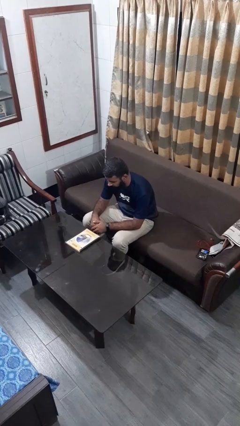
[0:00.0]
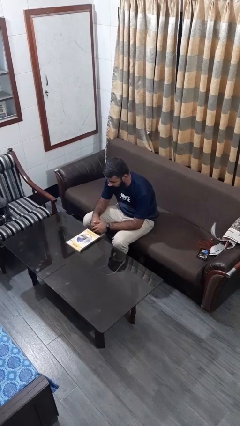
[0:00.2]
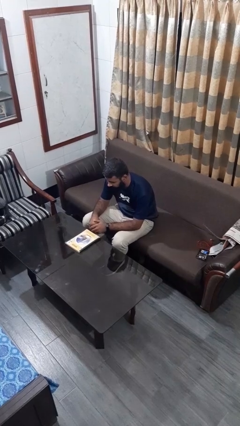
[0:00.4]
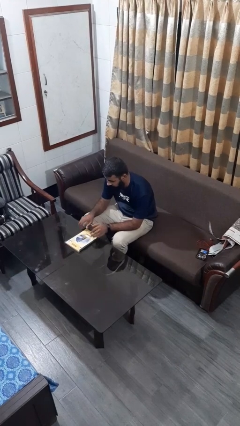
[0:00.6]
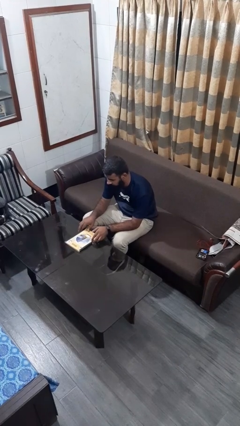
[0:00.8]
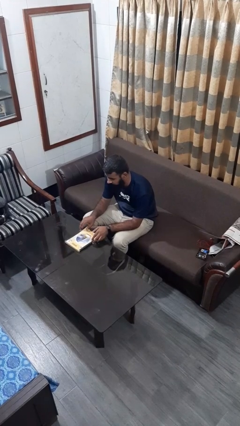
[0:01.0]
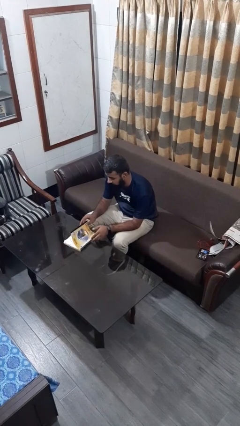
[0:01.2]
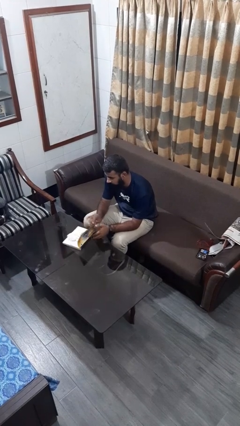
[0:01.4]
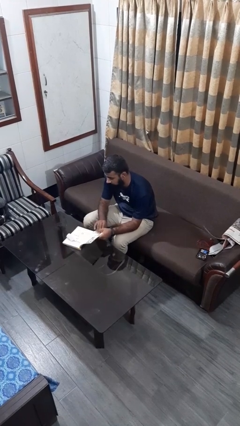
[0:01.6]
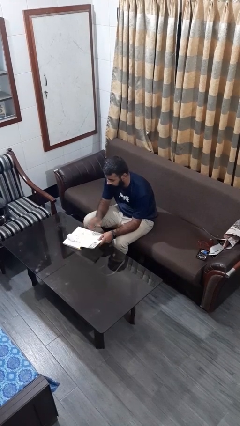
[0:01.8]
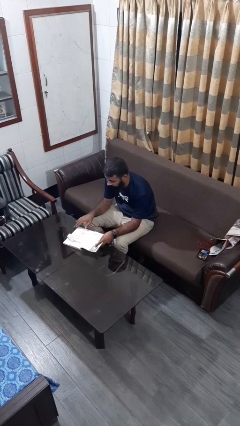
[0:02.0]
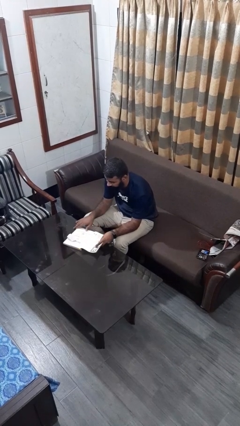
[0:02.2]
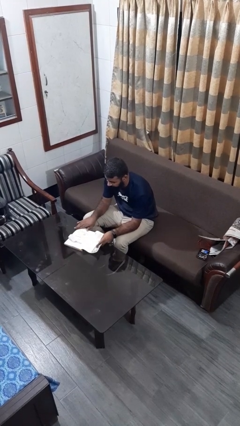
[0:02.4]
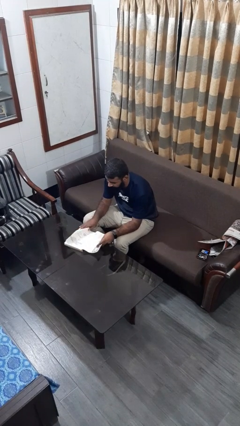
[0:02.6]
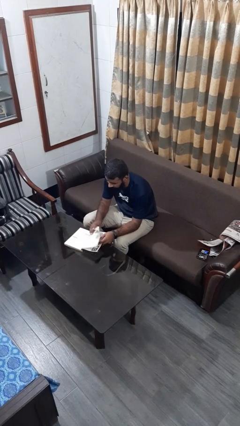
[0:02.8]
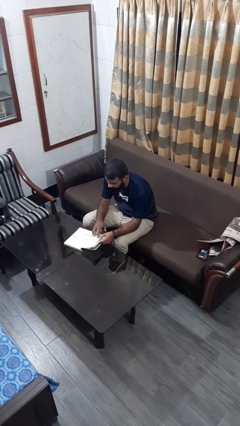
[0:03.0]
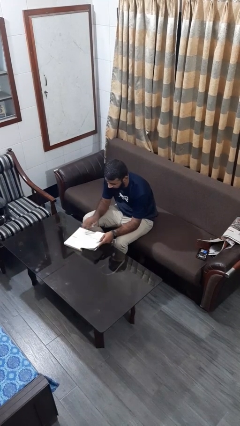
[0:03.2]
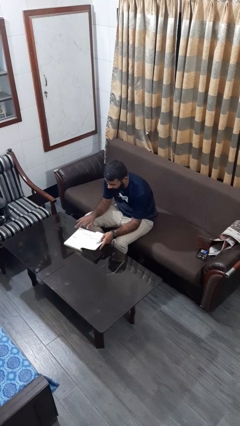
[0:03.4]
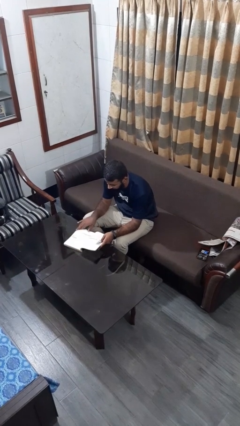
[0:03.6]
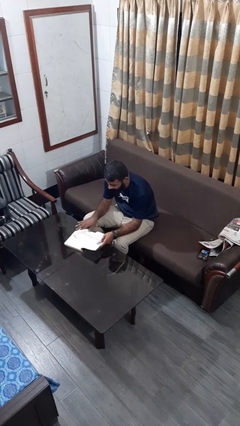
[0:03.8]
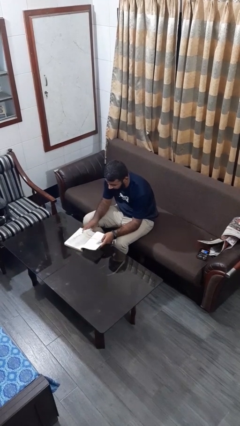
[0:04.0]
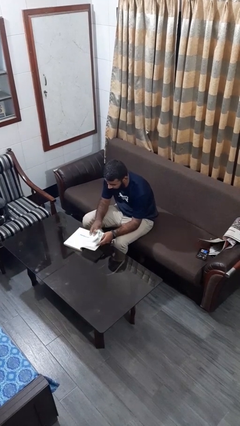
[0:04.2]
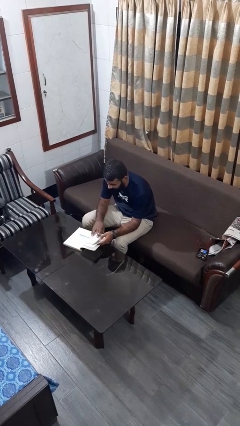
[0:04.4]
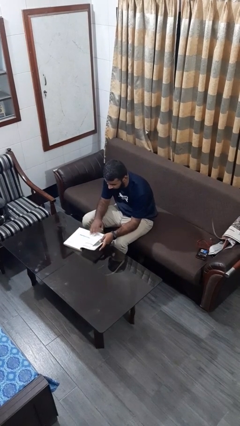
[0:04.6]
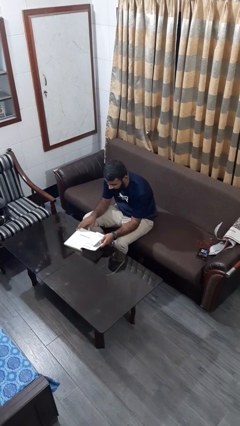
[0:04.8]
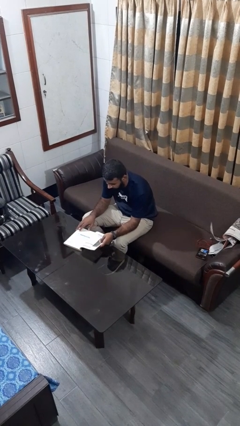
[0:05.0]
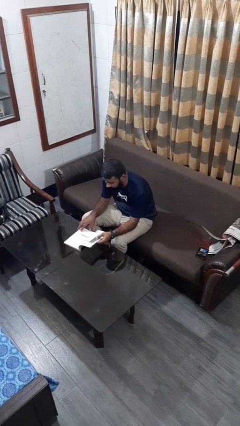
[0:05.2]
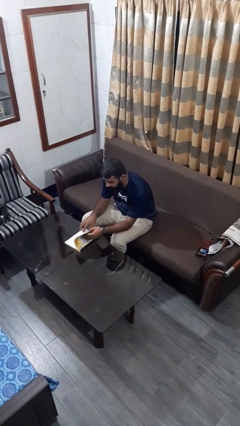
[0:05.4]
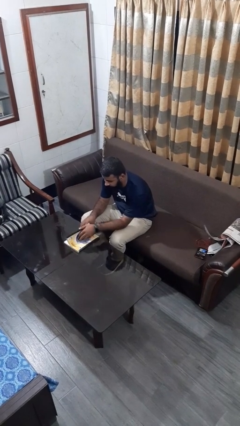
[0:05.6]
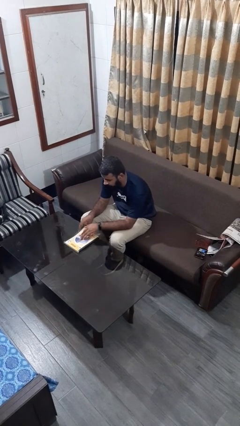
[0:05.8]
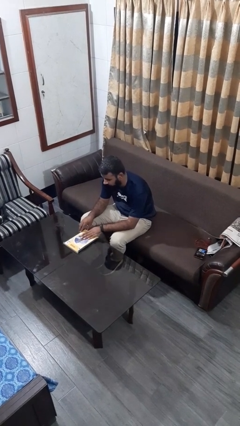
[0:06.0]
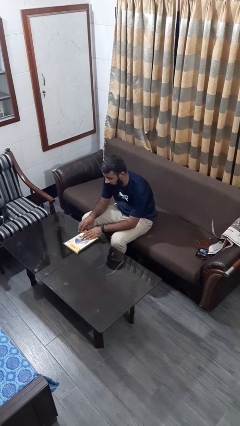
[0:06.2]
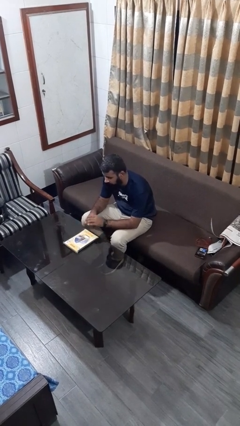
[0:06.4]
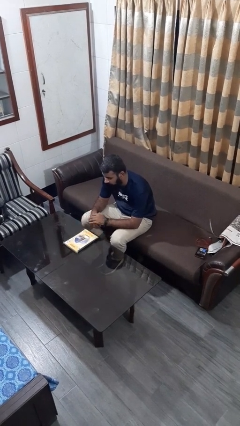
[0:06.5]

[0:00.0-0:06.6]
person reads book

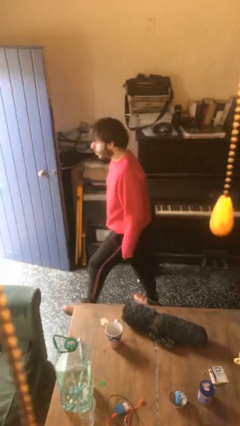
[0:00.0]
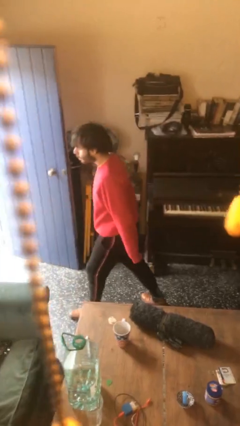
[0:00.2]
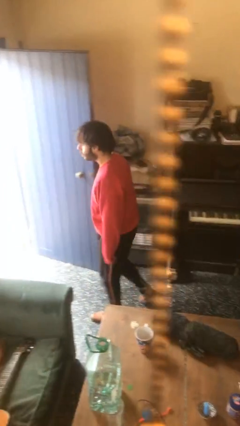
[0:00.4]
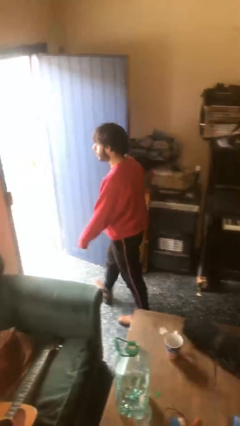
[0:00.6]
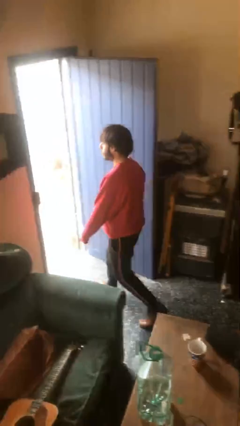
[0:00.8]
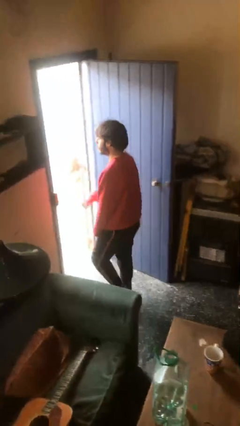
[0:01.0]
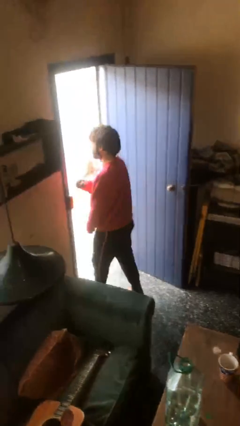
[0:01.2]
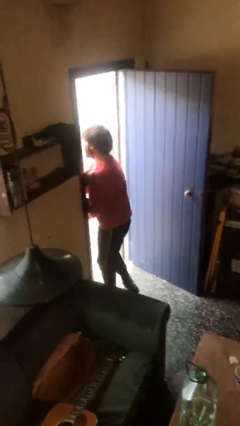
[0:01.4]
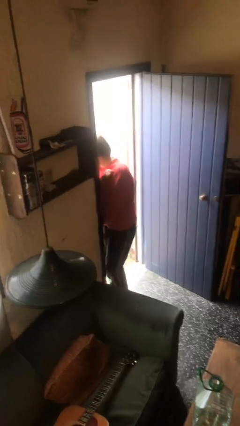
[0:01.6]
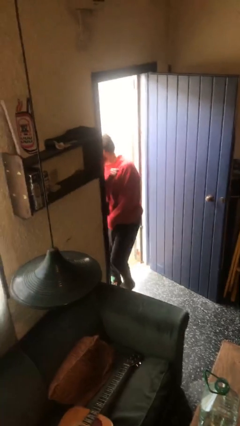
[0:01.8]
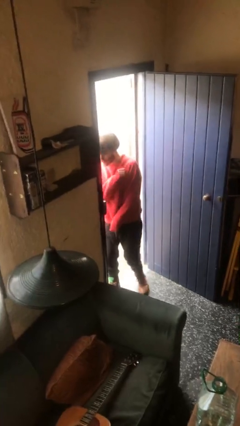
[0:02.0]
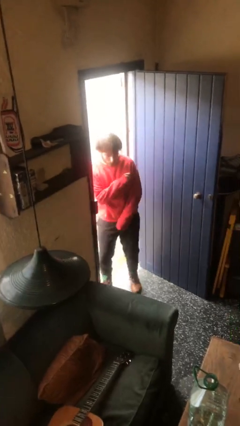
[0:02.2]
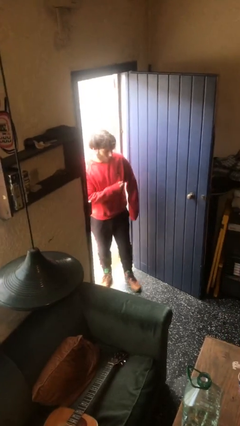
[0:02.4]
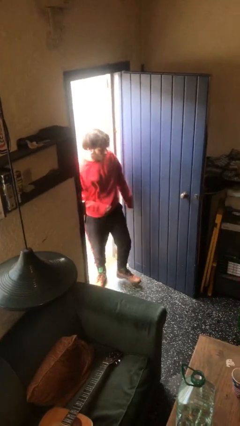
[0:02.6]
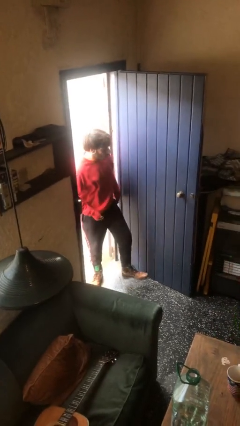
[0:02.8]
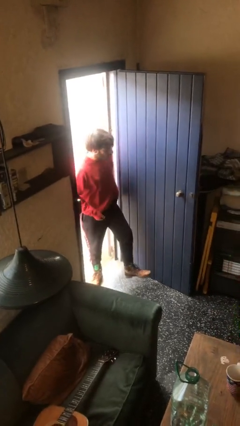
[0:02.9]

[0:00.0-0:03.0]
person bumps into wall

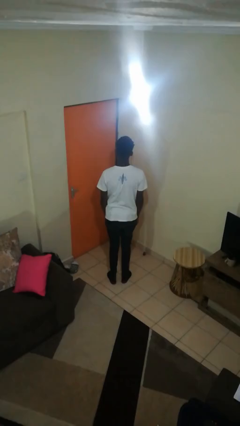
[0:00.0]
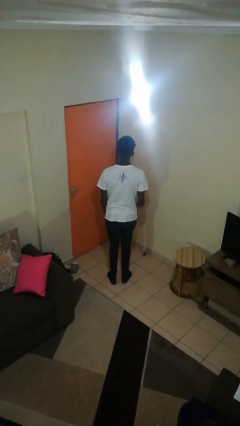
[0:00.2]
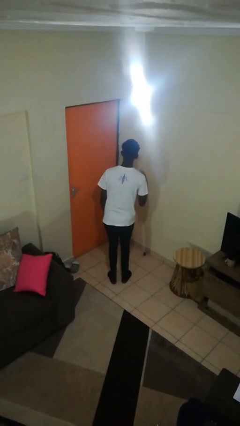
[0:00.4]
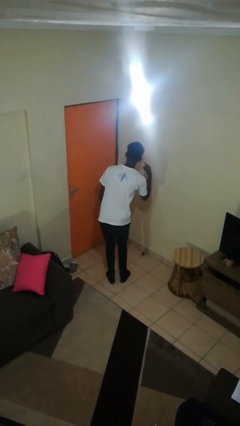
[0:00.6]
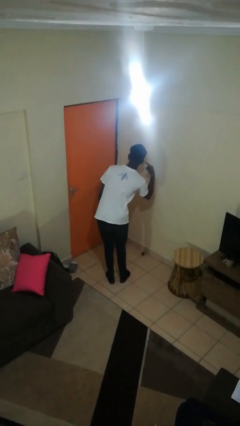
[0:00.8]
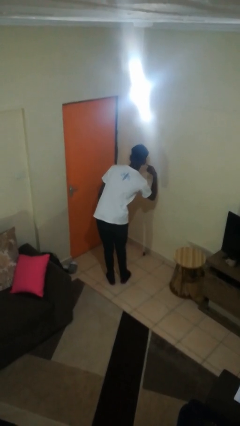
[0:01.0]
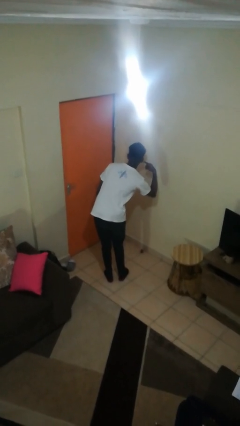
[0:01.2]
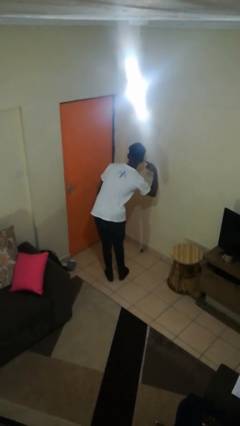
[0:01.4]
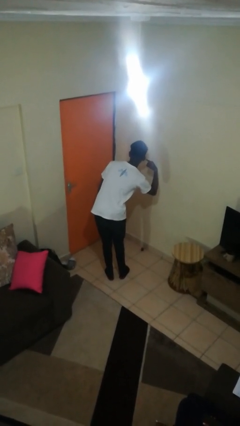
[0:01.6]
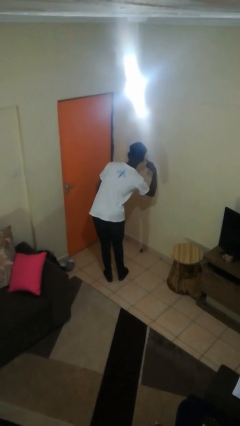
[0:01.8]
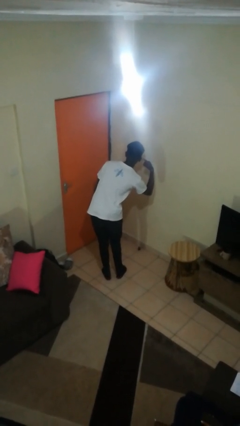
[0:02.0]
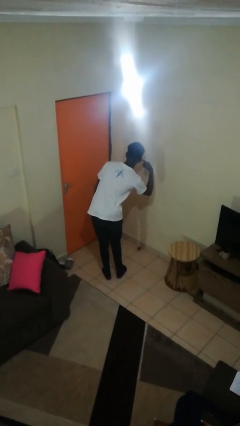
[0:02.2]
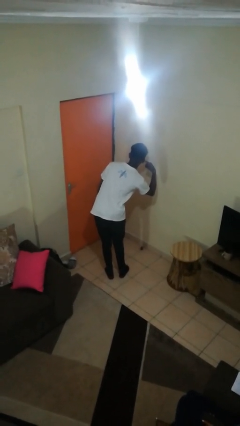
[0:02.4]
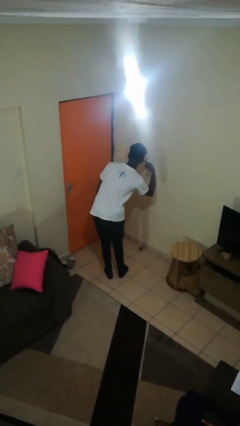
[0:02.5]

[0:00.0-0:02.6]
person gestures listen closely

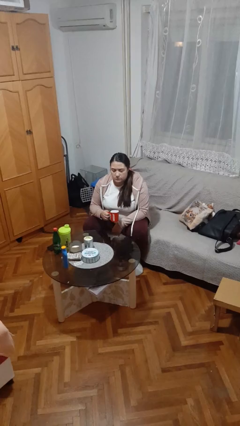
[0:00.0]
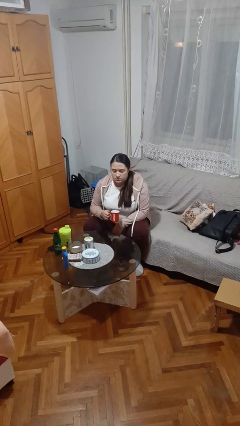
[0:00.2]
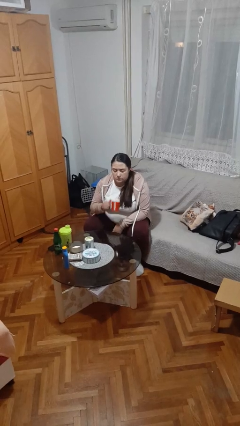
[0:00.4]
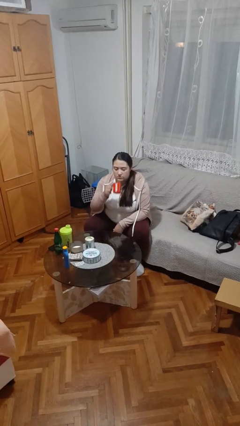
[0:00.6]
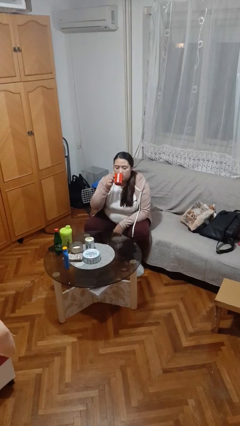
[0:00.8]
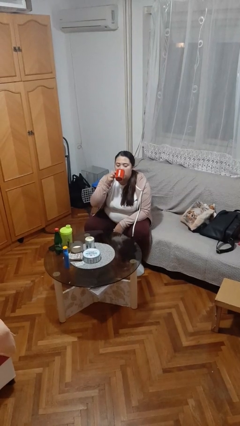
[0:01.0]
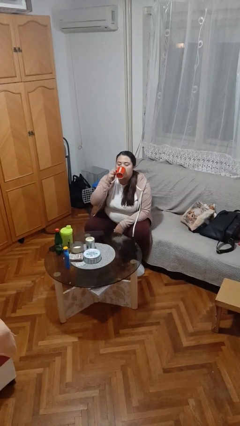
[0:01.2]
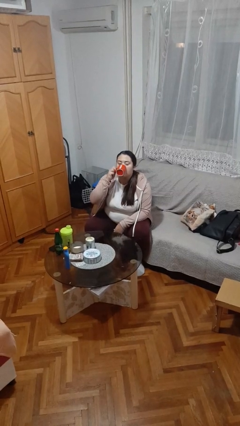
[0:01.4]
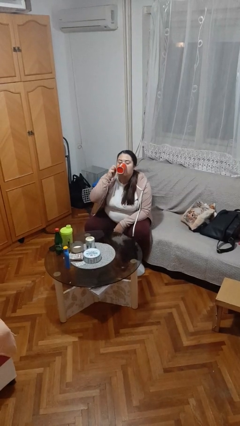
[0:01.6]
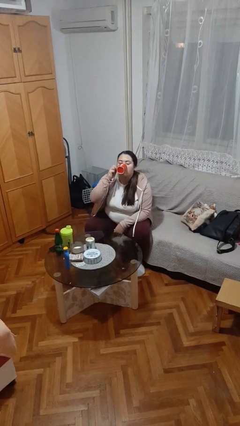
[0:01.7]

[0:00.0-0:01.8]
person drinks from mug

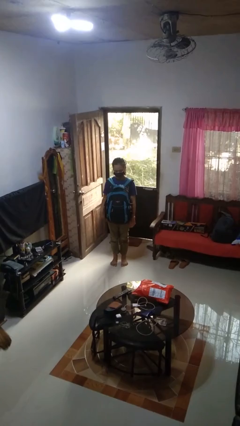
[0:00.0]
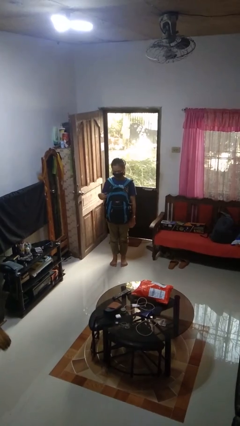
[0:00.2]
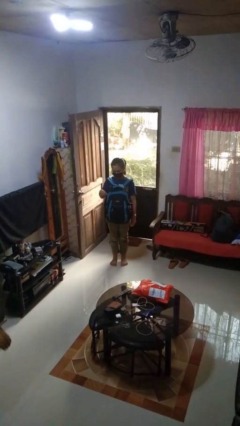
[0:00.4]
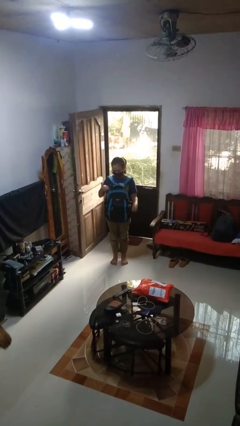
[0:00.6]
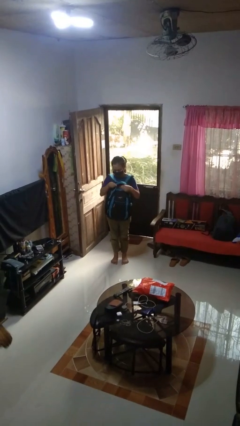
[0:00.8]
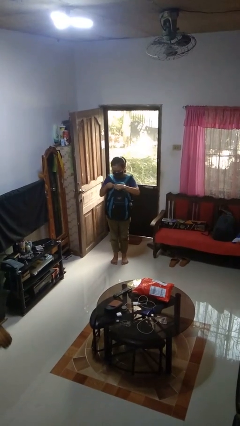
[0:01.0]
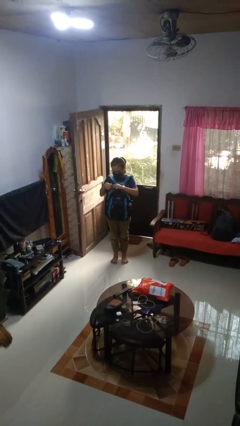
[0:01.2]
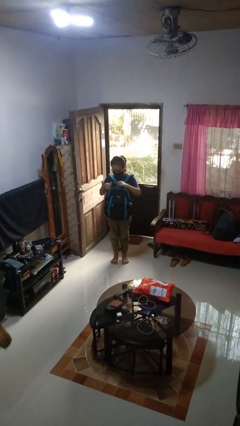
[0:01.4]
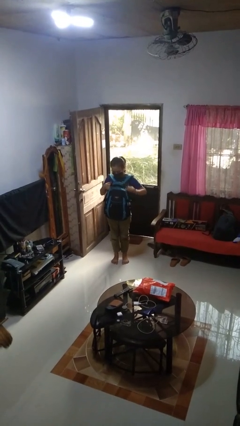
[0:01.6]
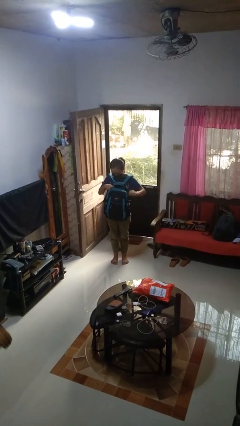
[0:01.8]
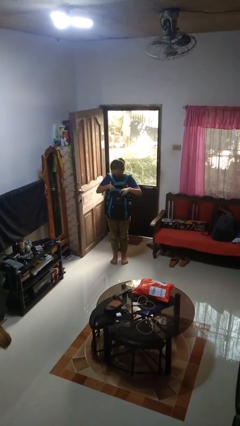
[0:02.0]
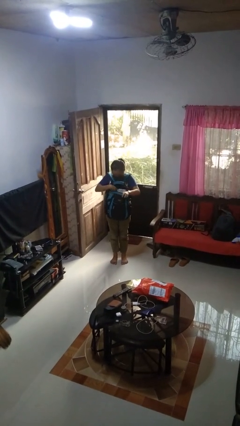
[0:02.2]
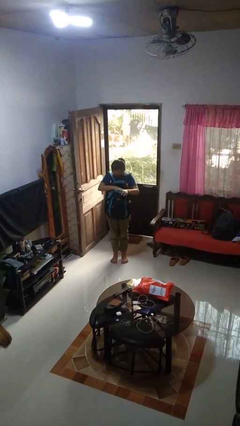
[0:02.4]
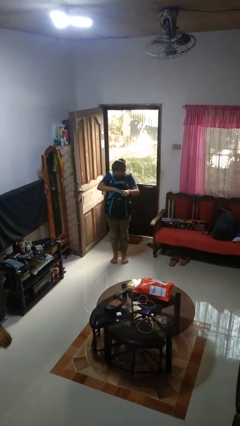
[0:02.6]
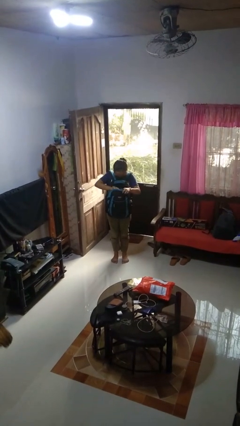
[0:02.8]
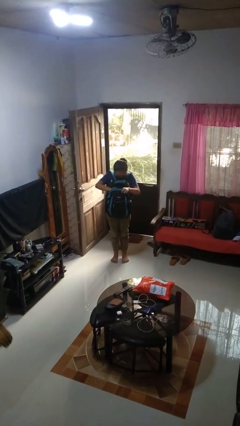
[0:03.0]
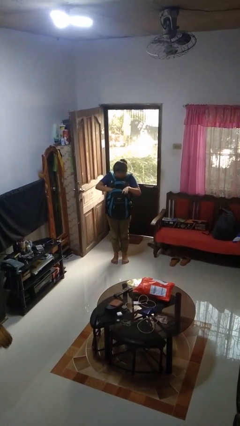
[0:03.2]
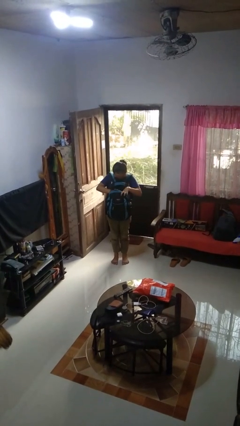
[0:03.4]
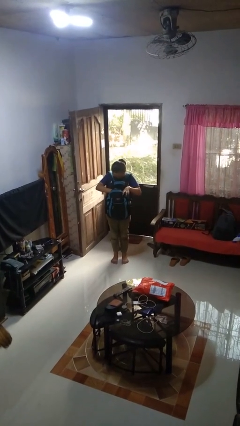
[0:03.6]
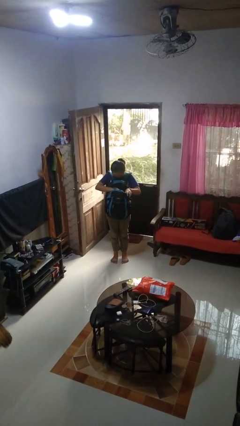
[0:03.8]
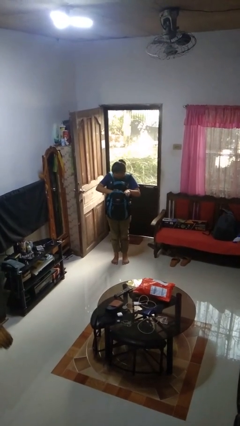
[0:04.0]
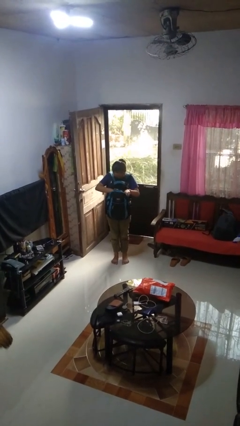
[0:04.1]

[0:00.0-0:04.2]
person searches in backpack
